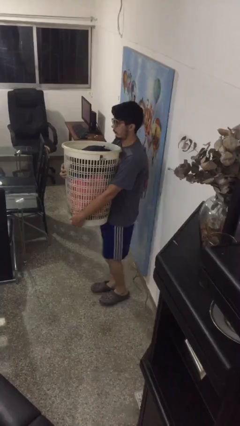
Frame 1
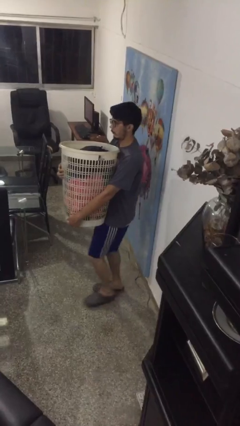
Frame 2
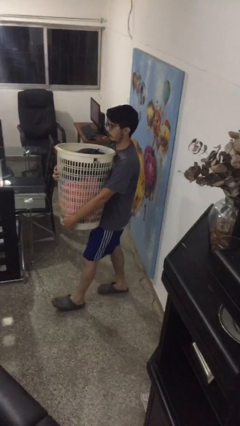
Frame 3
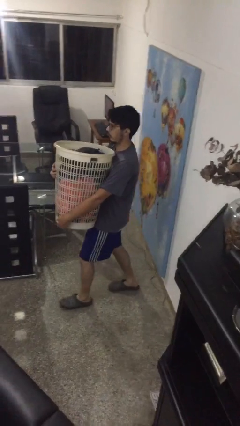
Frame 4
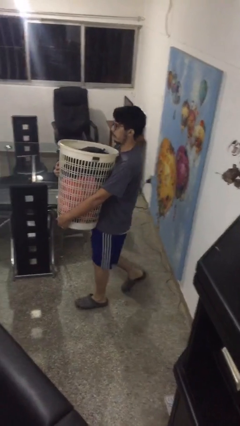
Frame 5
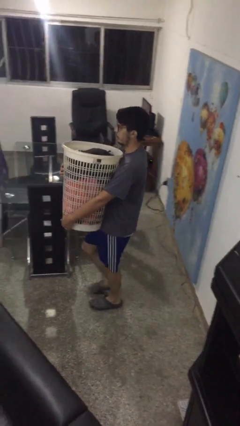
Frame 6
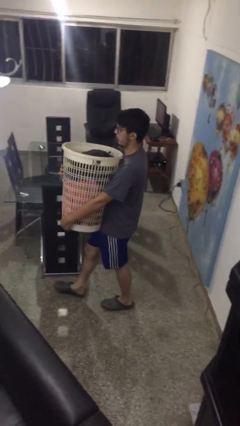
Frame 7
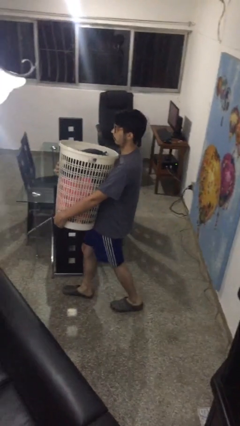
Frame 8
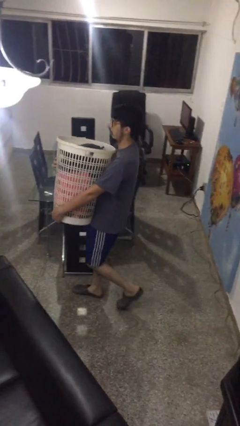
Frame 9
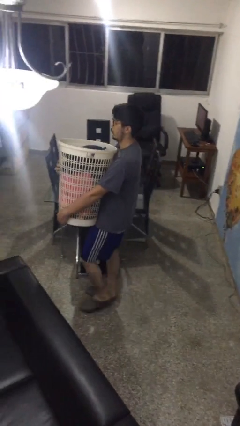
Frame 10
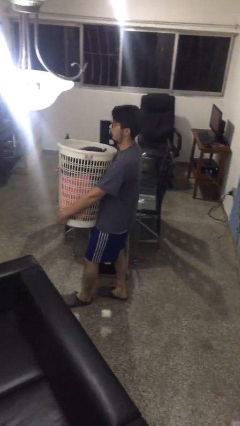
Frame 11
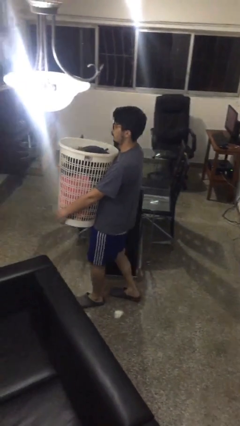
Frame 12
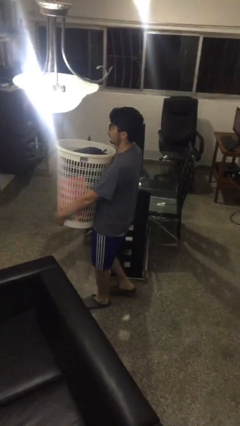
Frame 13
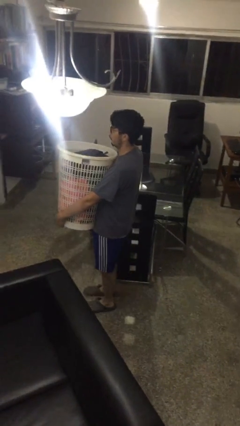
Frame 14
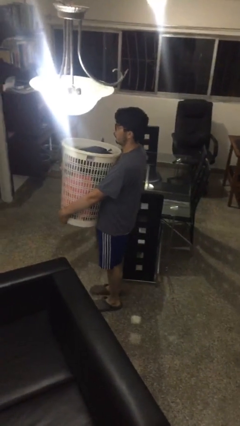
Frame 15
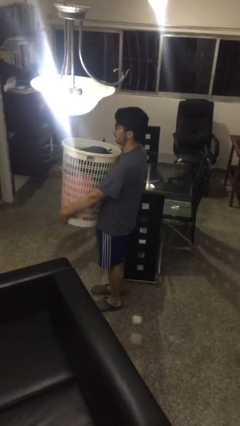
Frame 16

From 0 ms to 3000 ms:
person carries laundry basket

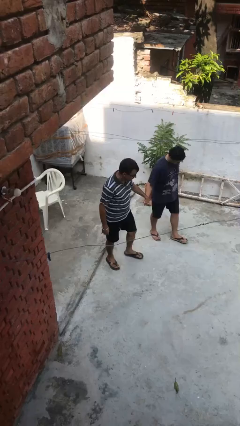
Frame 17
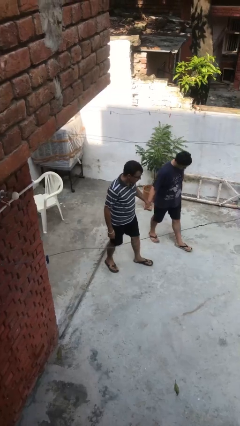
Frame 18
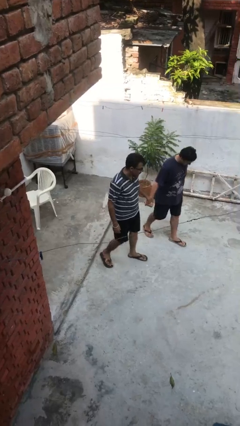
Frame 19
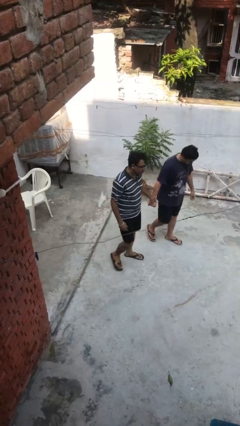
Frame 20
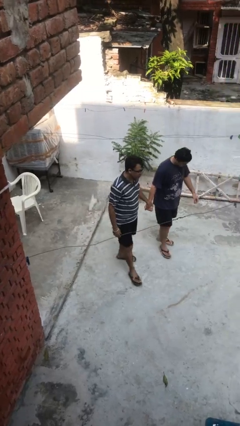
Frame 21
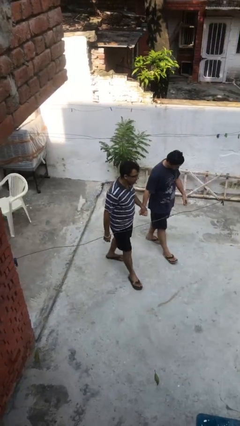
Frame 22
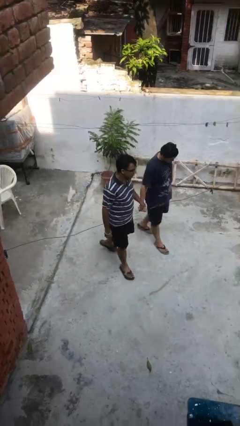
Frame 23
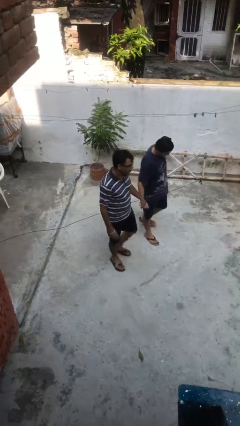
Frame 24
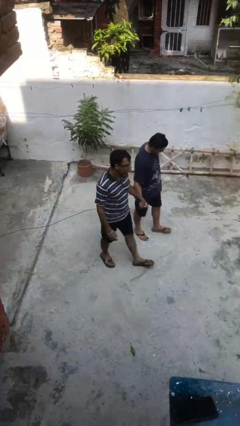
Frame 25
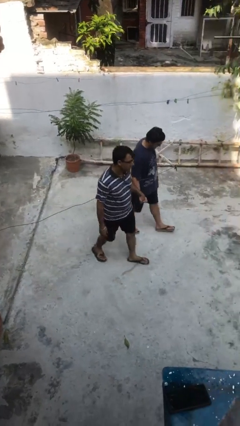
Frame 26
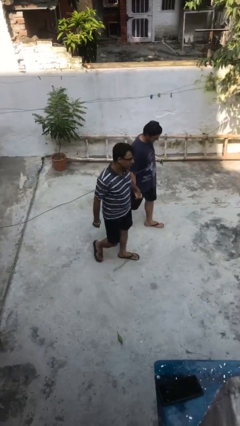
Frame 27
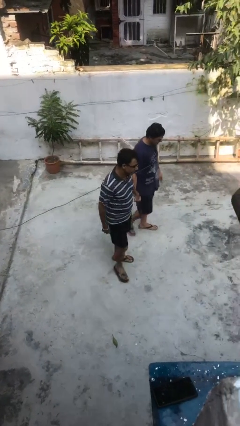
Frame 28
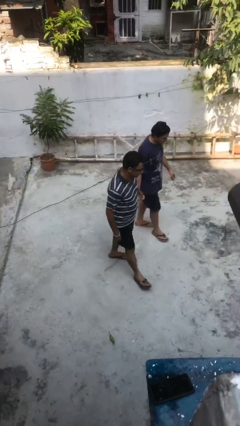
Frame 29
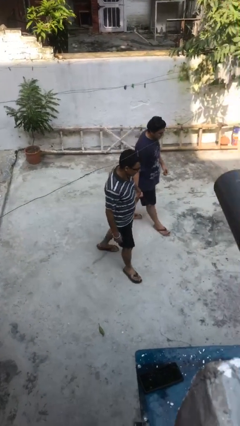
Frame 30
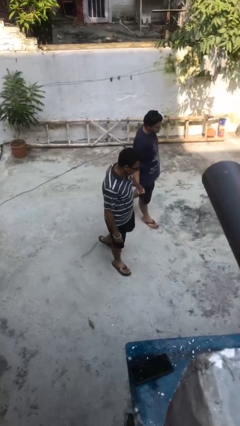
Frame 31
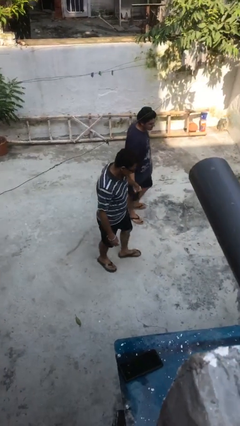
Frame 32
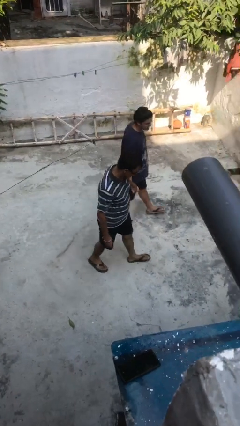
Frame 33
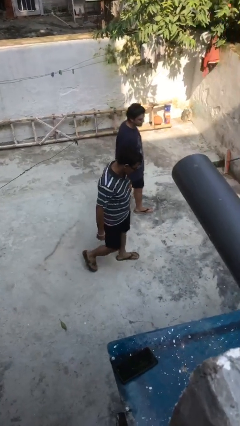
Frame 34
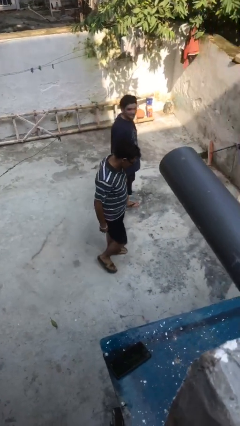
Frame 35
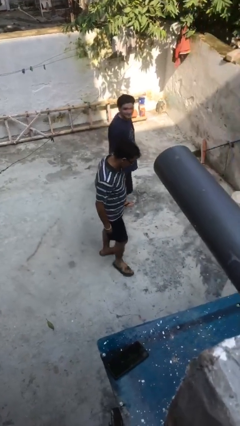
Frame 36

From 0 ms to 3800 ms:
person holds hand

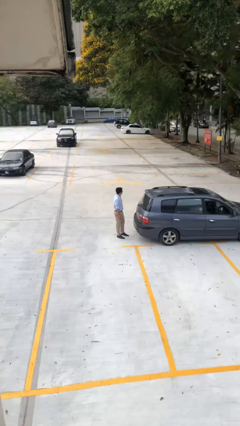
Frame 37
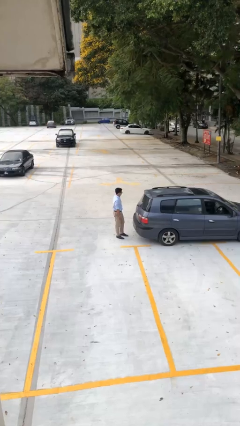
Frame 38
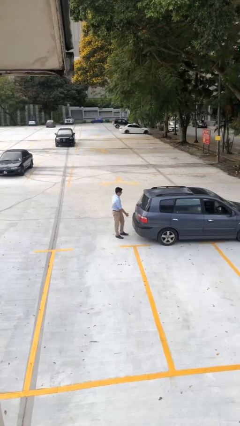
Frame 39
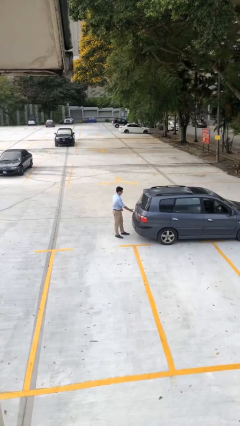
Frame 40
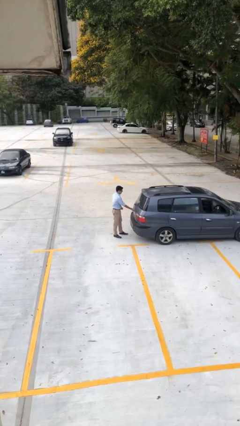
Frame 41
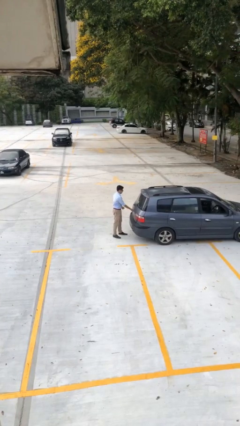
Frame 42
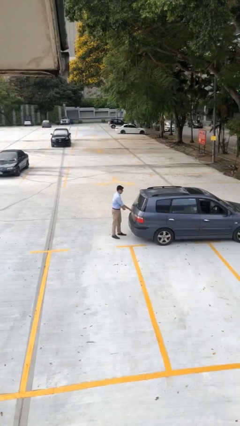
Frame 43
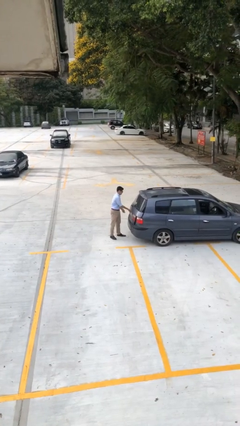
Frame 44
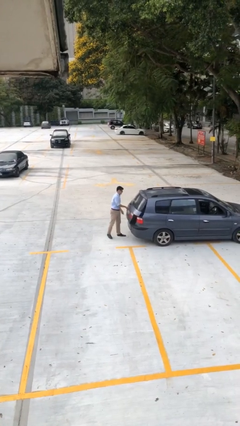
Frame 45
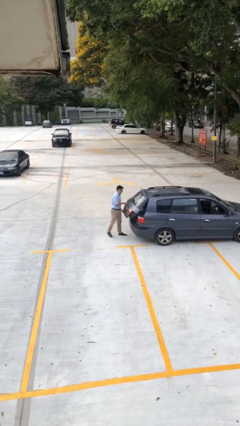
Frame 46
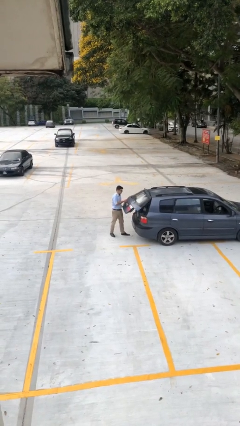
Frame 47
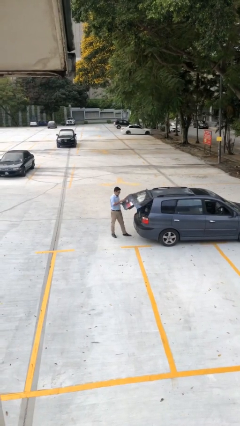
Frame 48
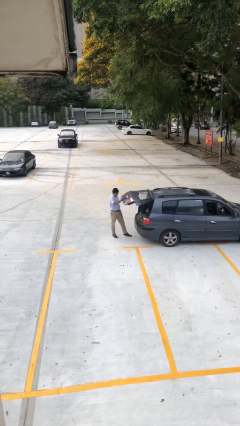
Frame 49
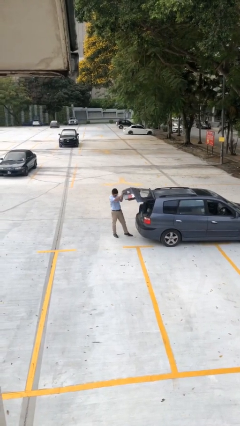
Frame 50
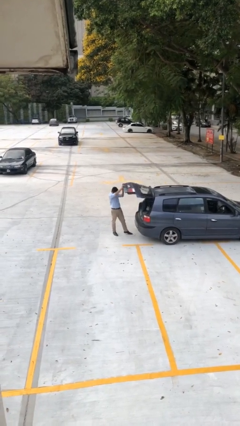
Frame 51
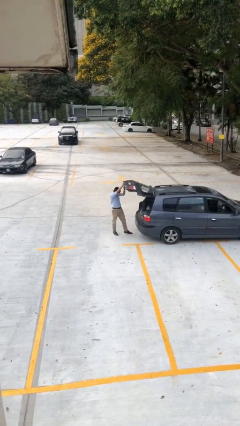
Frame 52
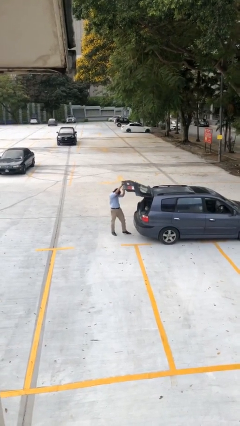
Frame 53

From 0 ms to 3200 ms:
person opens car trunk

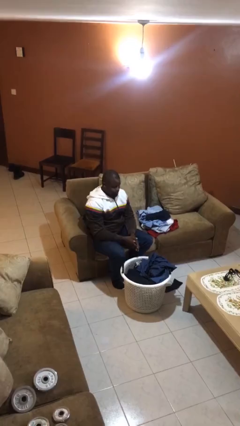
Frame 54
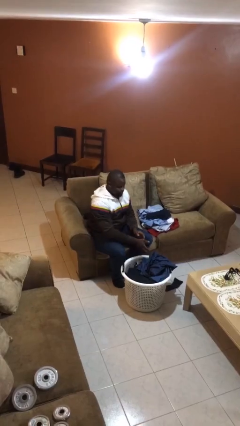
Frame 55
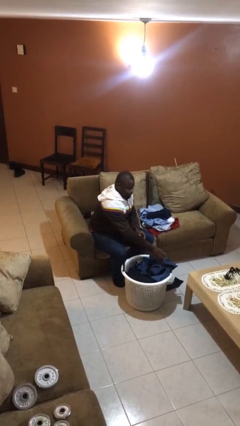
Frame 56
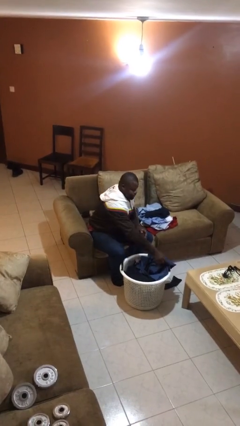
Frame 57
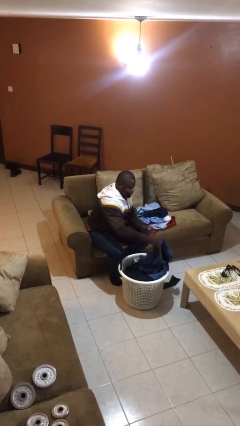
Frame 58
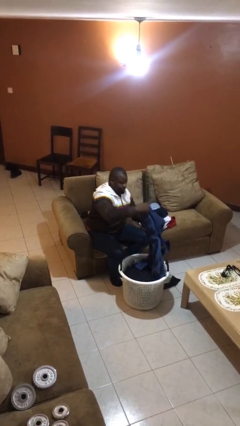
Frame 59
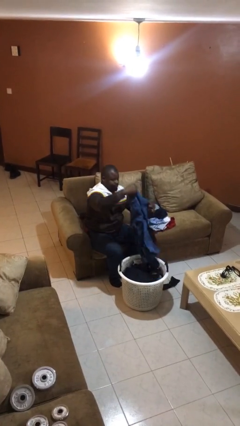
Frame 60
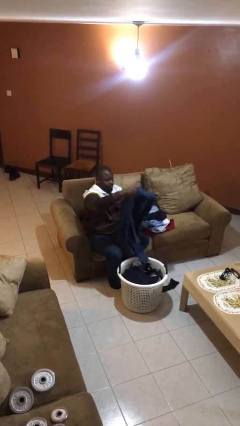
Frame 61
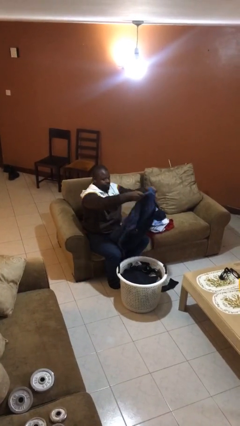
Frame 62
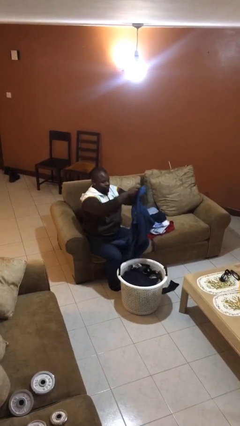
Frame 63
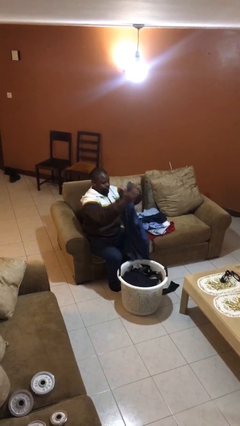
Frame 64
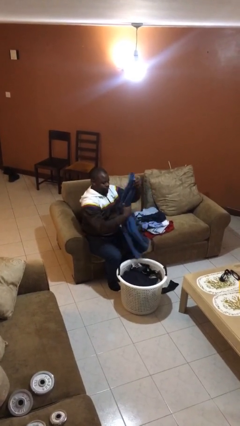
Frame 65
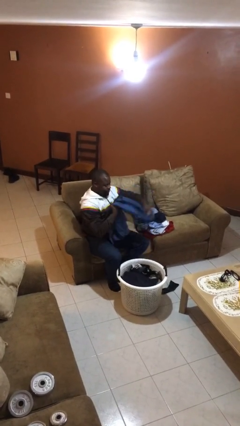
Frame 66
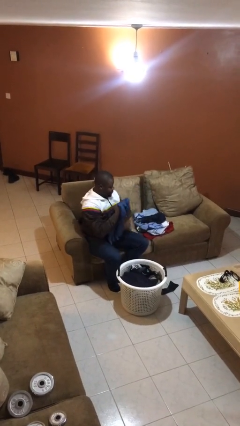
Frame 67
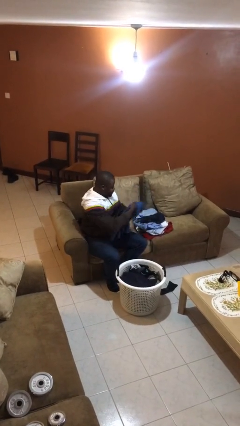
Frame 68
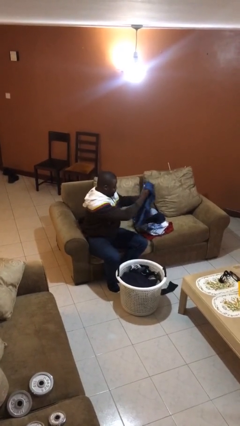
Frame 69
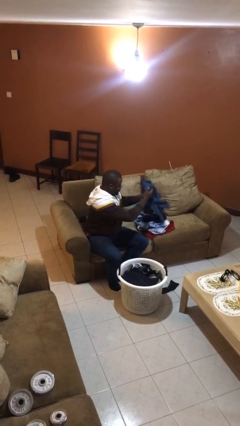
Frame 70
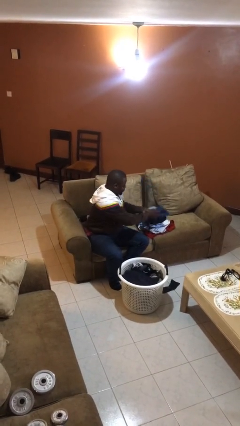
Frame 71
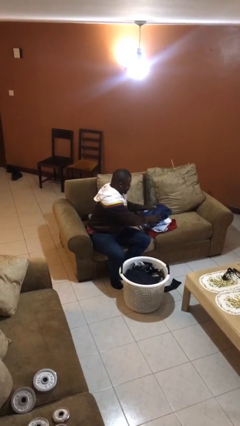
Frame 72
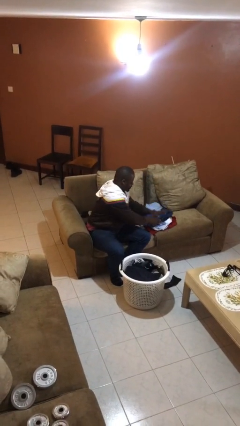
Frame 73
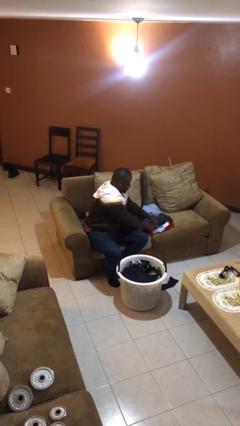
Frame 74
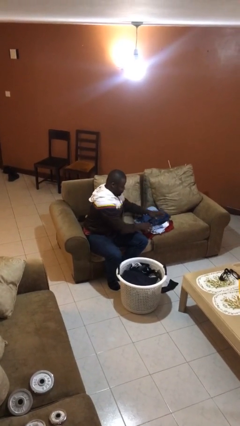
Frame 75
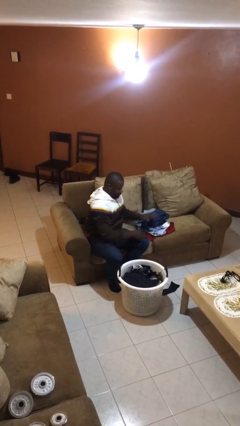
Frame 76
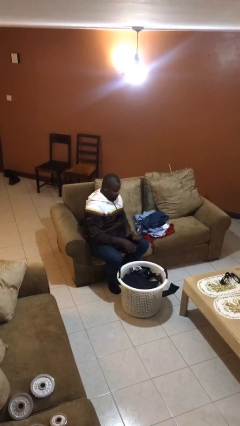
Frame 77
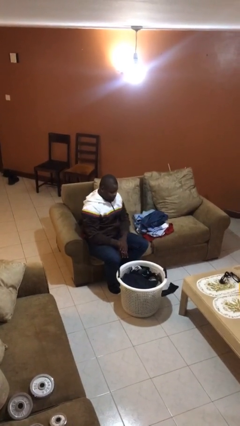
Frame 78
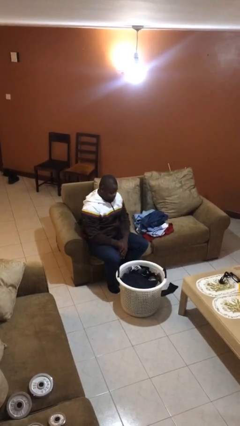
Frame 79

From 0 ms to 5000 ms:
person folds shirt

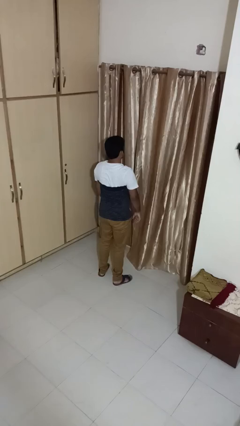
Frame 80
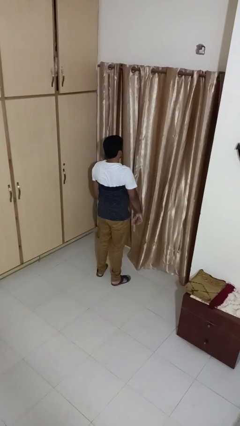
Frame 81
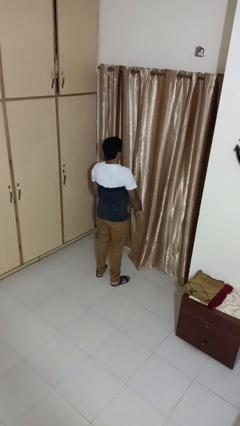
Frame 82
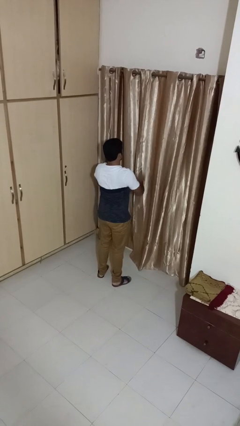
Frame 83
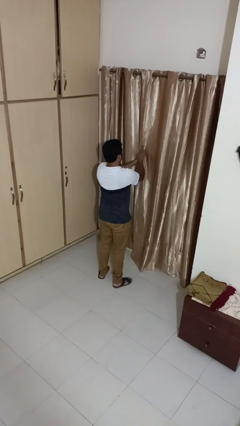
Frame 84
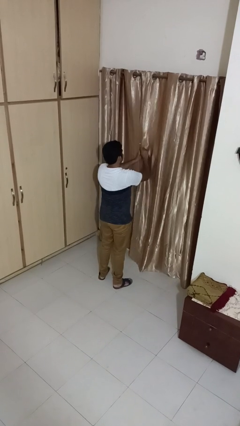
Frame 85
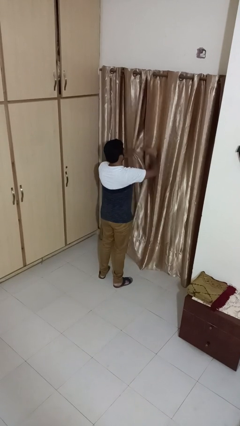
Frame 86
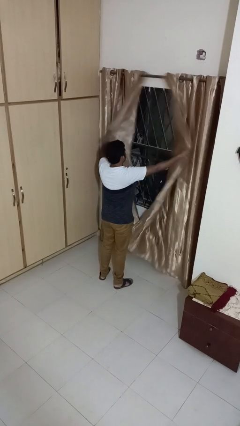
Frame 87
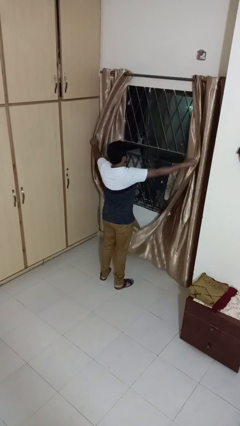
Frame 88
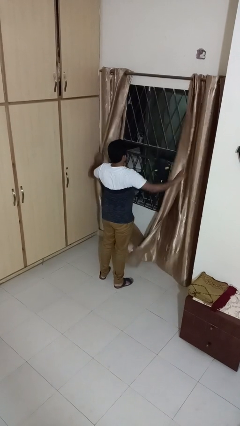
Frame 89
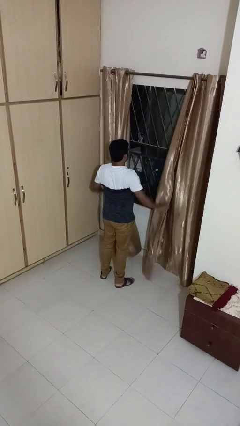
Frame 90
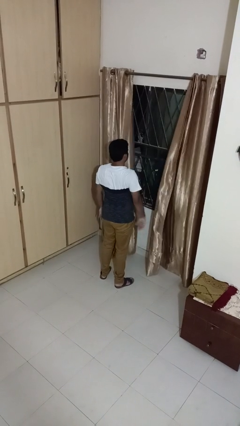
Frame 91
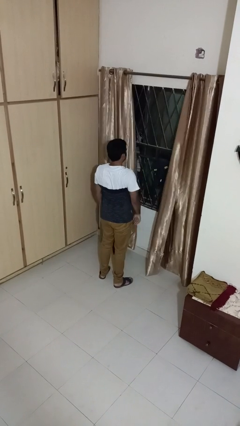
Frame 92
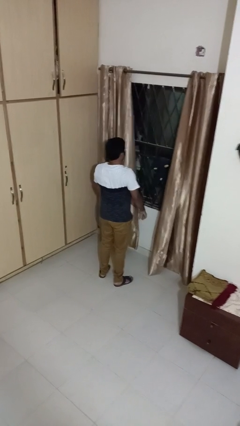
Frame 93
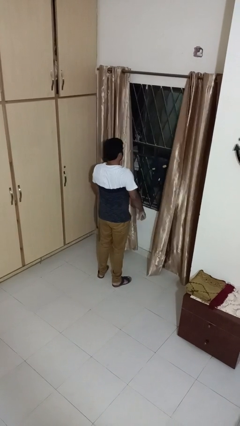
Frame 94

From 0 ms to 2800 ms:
person opens curtains
